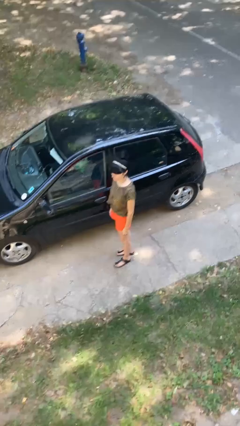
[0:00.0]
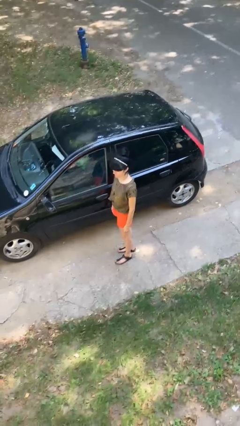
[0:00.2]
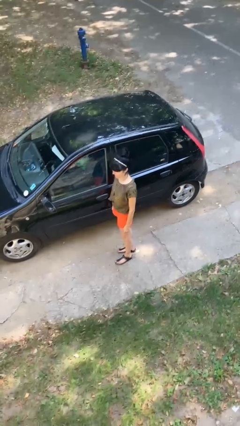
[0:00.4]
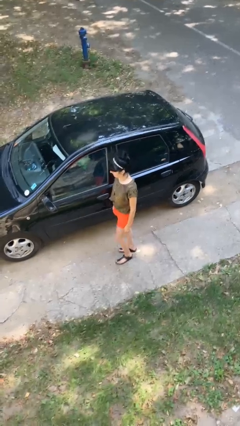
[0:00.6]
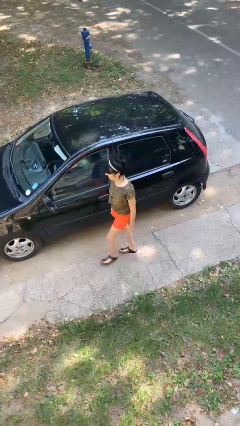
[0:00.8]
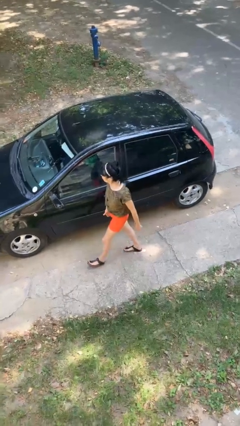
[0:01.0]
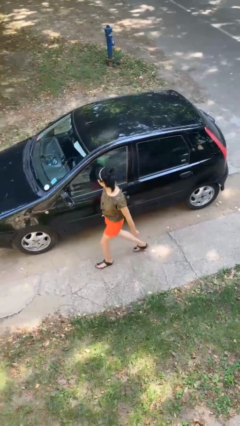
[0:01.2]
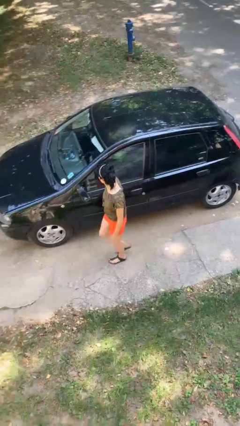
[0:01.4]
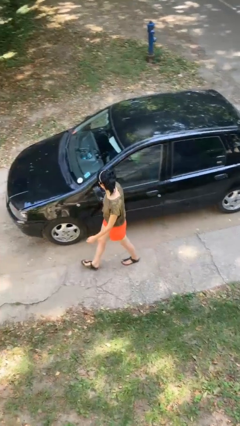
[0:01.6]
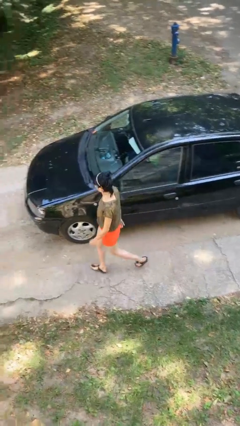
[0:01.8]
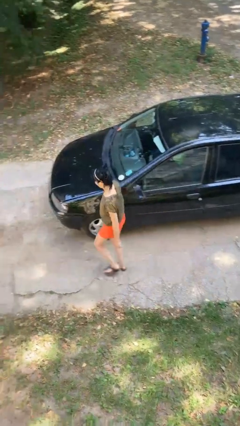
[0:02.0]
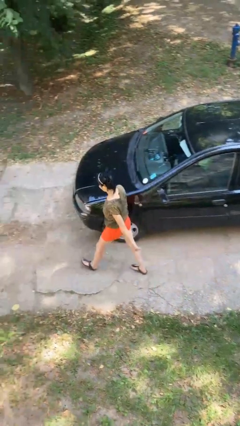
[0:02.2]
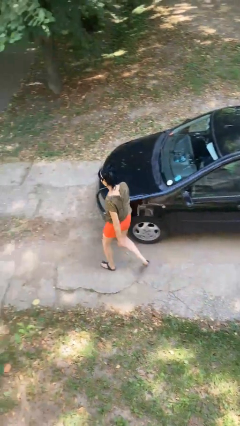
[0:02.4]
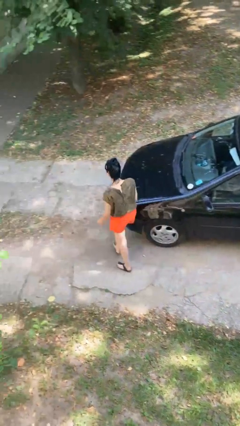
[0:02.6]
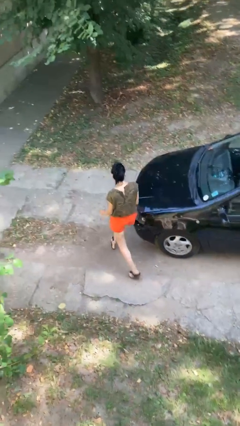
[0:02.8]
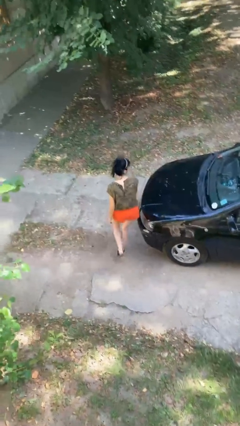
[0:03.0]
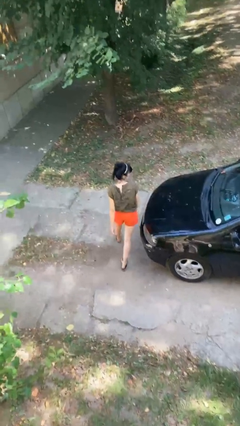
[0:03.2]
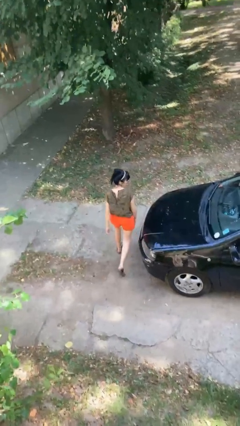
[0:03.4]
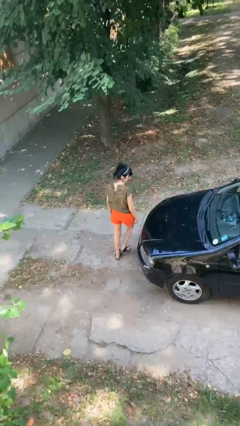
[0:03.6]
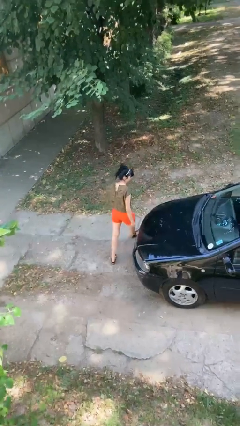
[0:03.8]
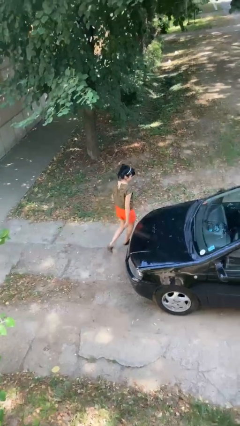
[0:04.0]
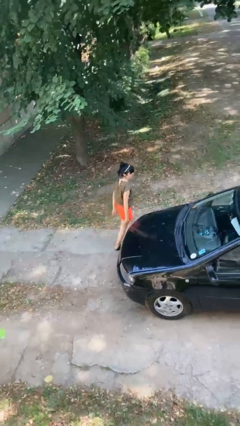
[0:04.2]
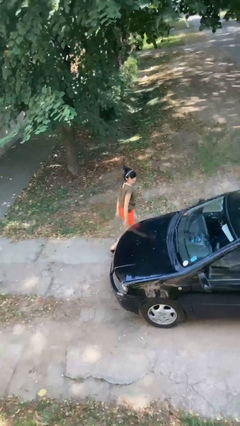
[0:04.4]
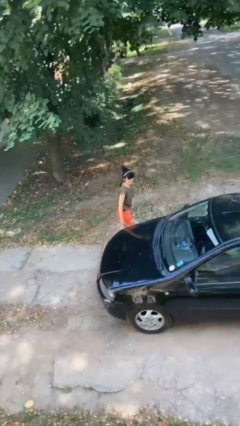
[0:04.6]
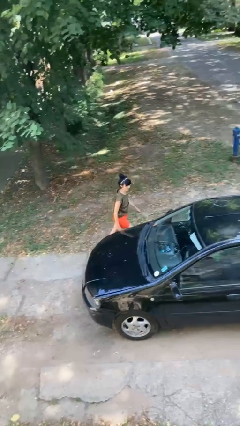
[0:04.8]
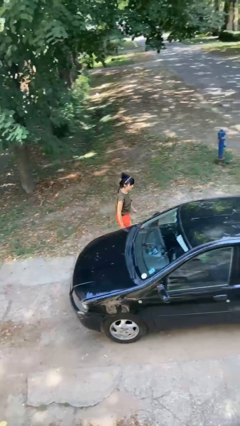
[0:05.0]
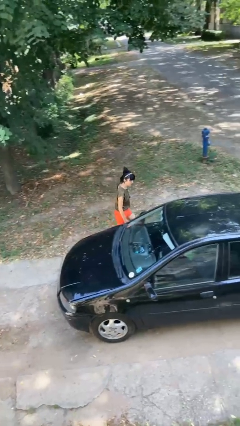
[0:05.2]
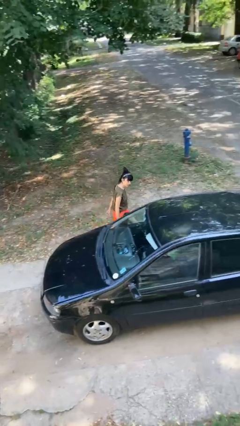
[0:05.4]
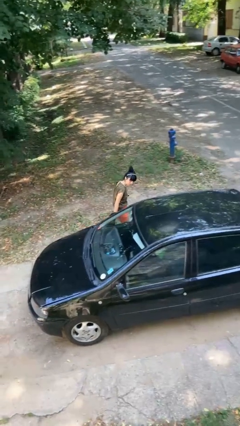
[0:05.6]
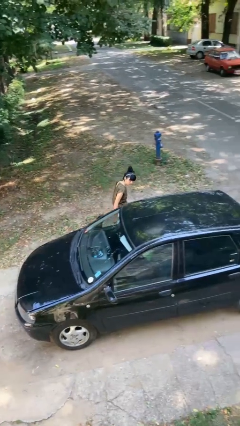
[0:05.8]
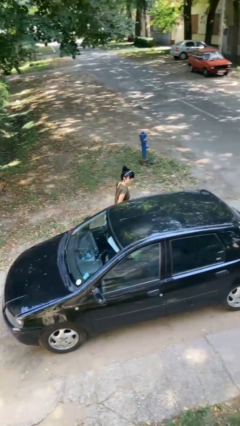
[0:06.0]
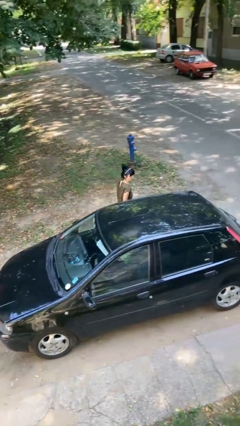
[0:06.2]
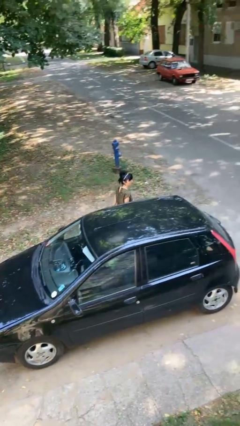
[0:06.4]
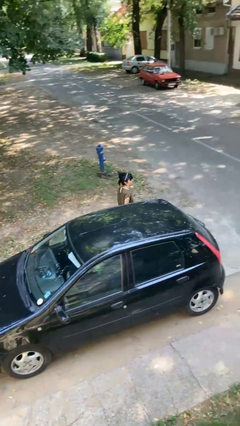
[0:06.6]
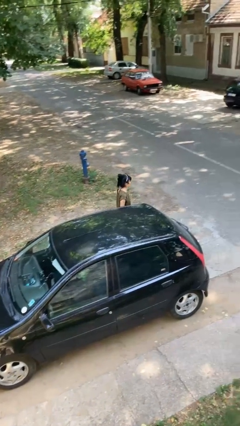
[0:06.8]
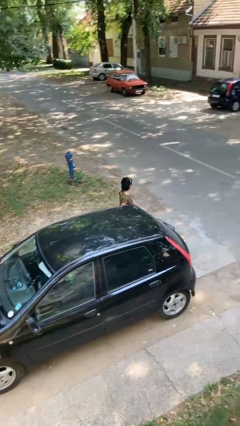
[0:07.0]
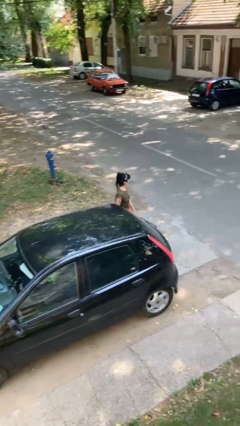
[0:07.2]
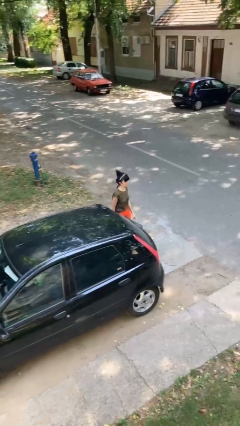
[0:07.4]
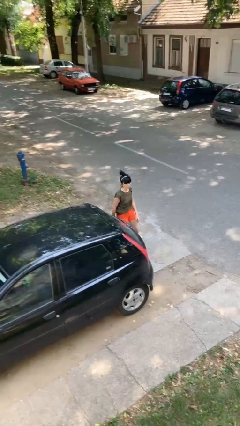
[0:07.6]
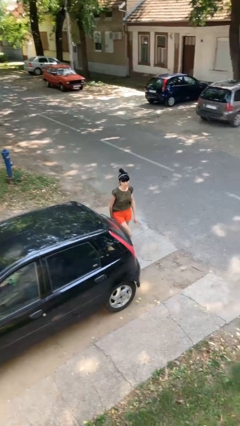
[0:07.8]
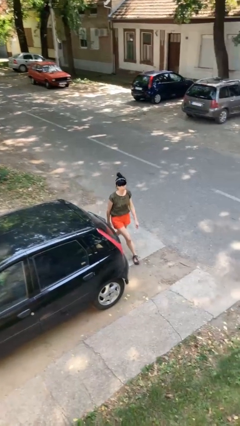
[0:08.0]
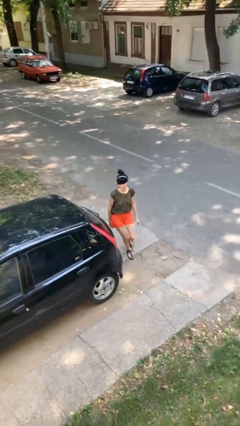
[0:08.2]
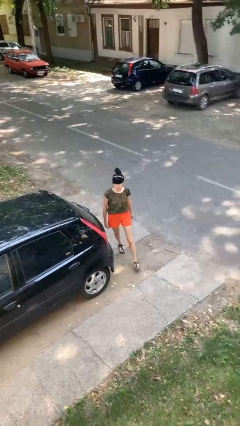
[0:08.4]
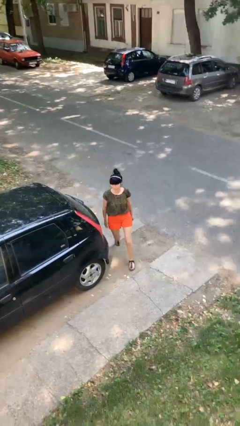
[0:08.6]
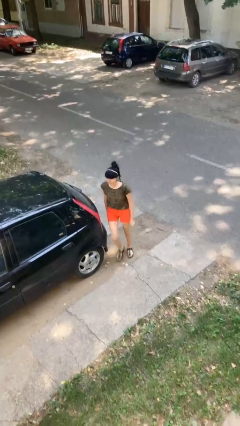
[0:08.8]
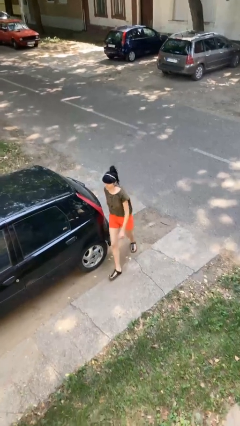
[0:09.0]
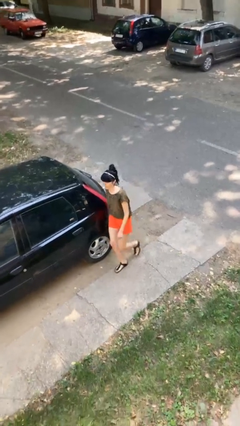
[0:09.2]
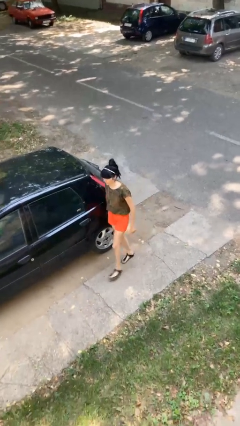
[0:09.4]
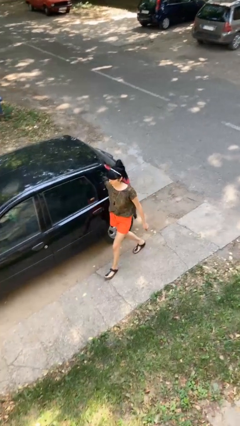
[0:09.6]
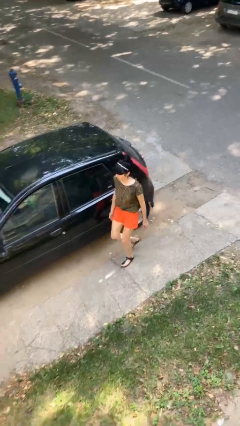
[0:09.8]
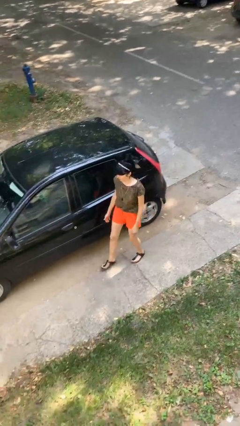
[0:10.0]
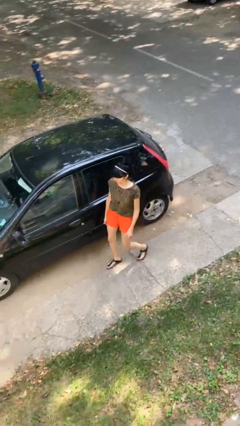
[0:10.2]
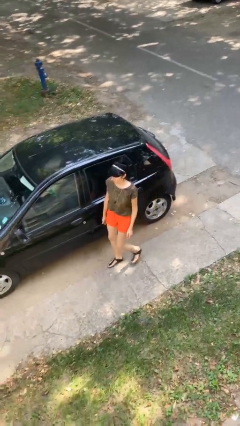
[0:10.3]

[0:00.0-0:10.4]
person walks around car

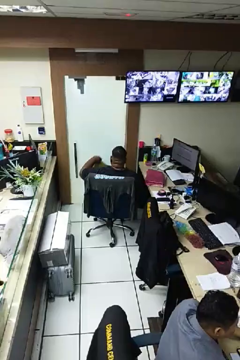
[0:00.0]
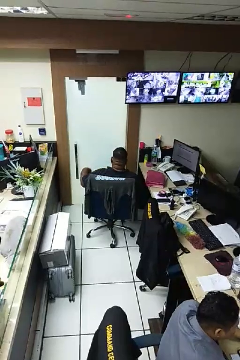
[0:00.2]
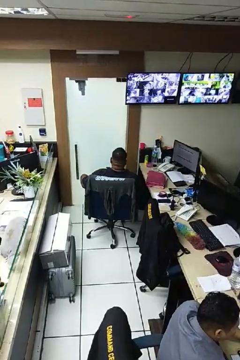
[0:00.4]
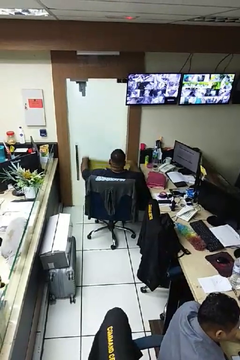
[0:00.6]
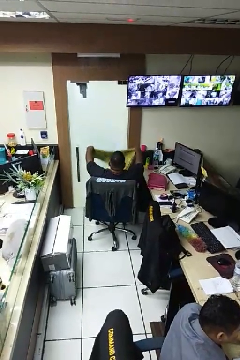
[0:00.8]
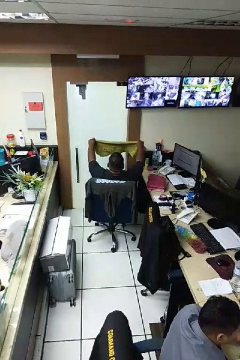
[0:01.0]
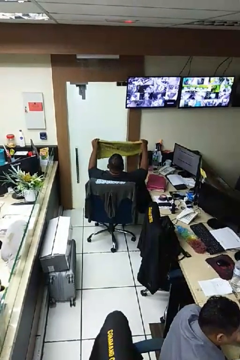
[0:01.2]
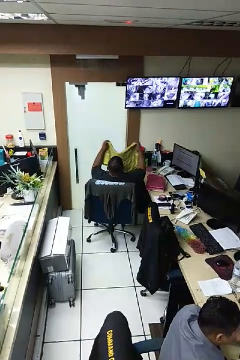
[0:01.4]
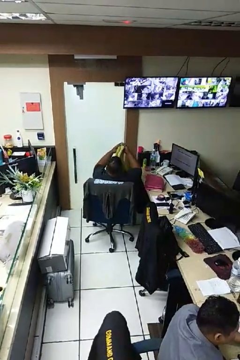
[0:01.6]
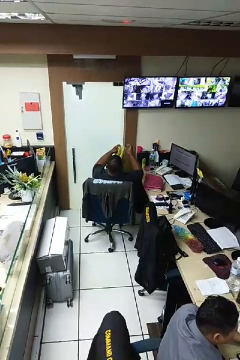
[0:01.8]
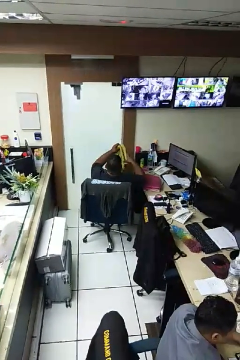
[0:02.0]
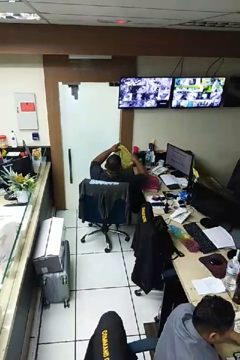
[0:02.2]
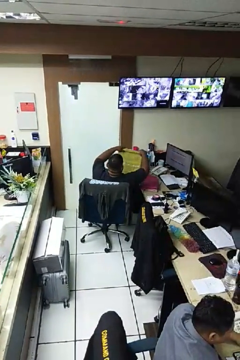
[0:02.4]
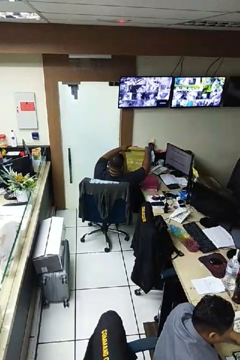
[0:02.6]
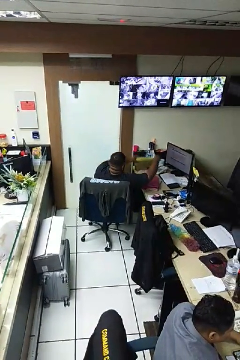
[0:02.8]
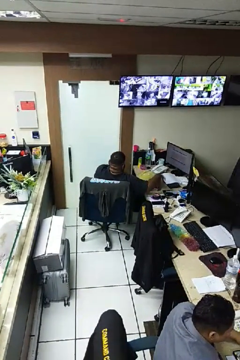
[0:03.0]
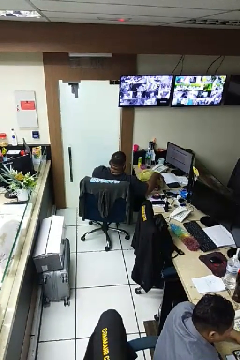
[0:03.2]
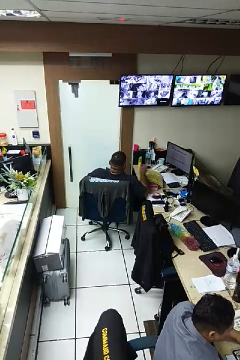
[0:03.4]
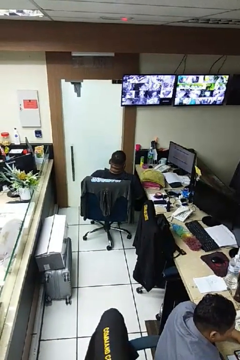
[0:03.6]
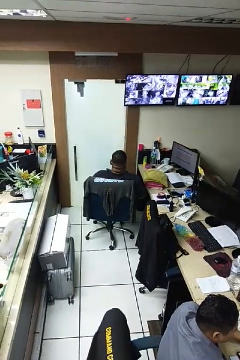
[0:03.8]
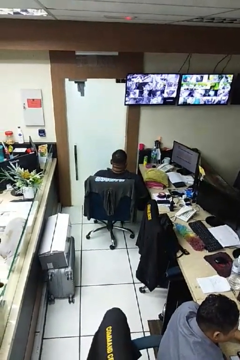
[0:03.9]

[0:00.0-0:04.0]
person folds towel

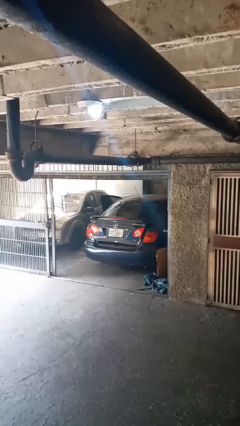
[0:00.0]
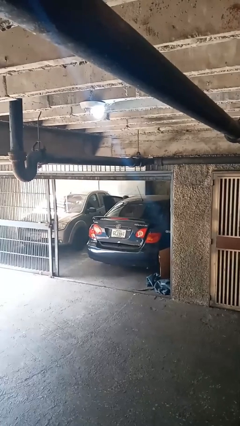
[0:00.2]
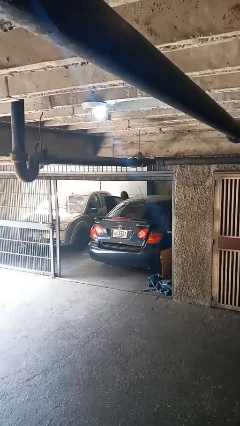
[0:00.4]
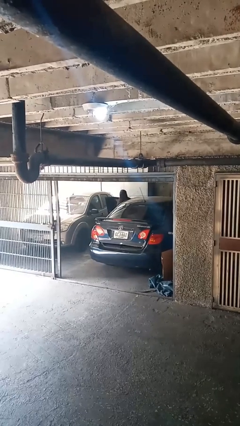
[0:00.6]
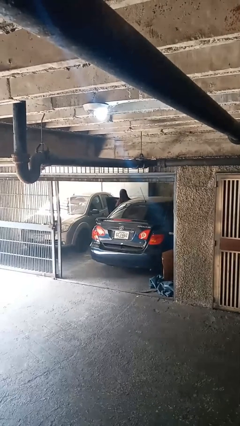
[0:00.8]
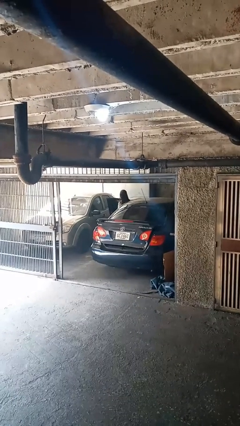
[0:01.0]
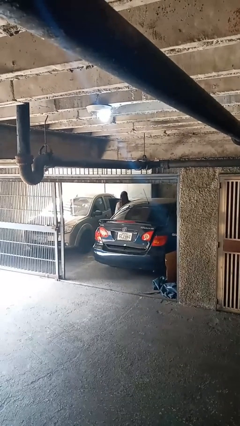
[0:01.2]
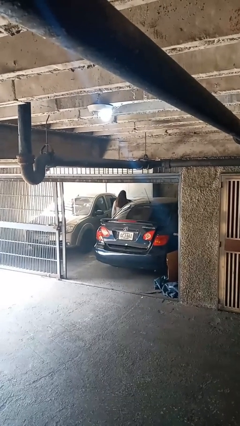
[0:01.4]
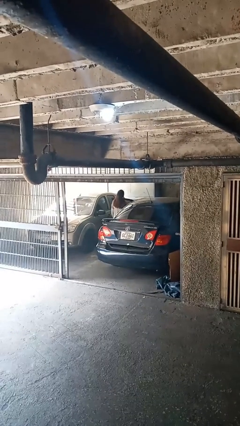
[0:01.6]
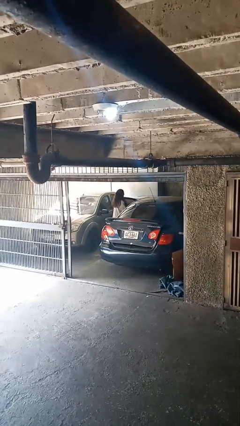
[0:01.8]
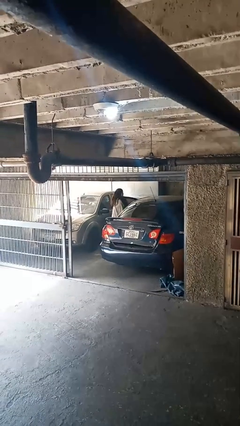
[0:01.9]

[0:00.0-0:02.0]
person exits car

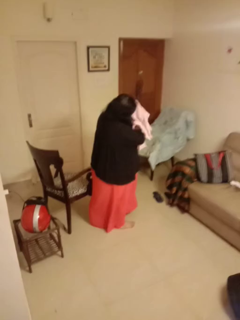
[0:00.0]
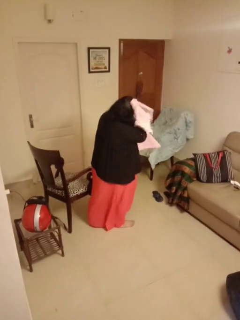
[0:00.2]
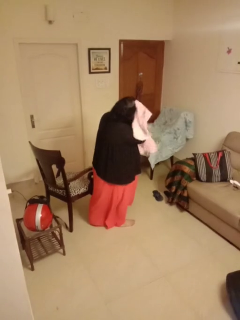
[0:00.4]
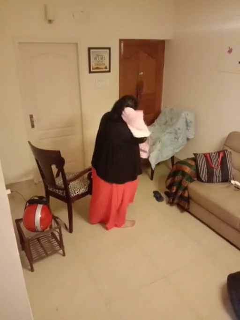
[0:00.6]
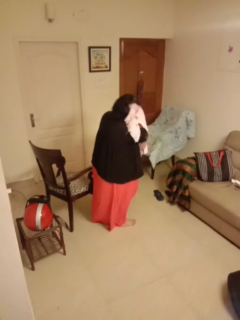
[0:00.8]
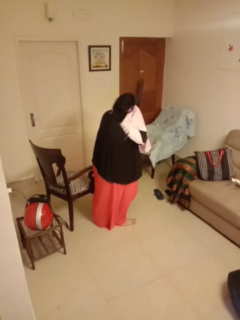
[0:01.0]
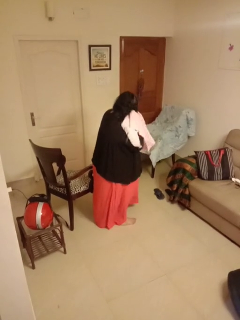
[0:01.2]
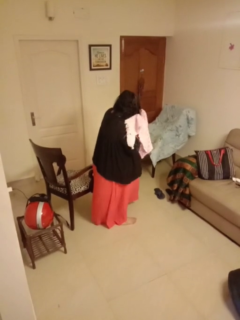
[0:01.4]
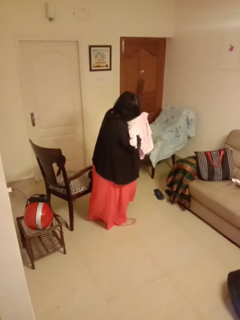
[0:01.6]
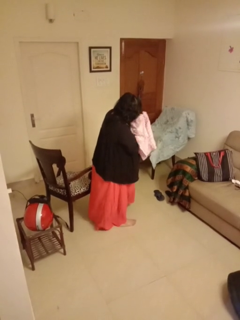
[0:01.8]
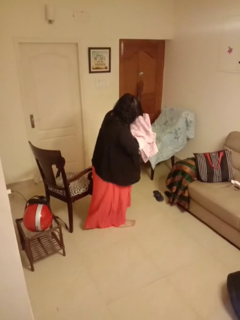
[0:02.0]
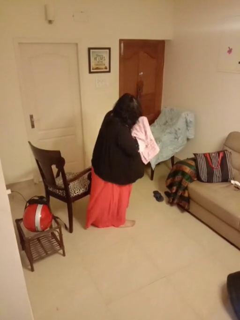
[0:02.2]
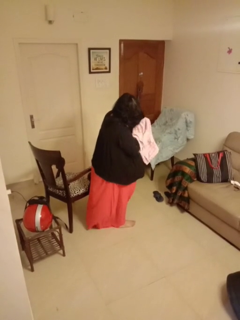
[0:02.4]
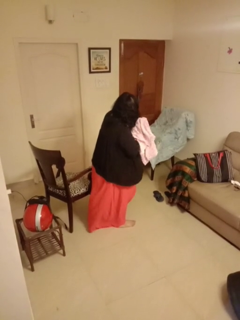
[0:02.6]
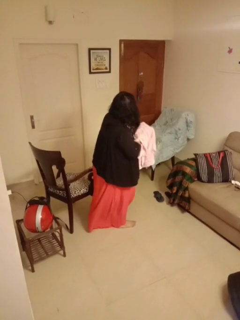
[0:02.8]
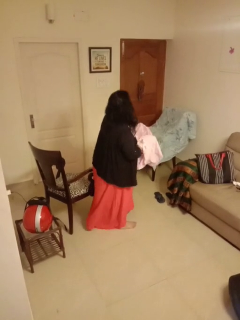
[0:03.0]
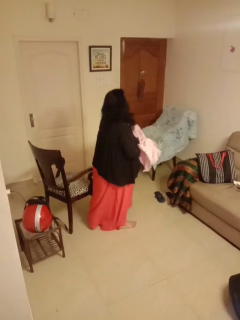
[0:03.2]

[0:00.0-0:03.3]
person dries hair with towel
